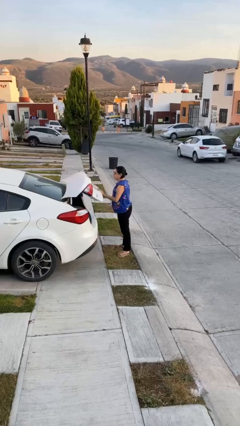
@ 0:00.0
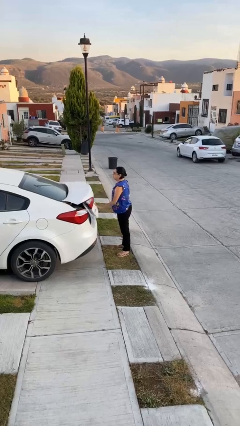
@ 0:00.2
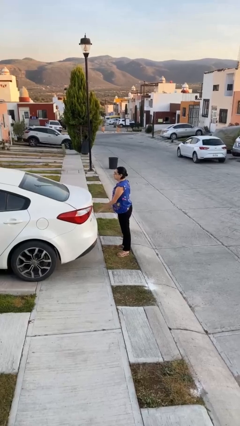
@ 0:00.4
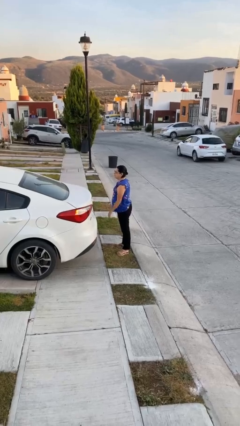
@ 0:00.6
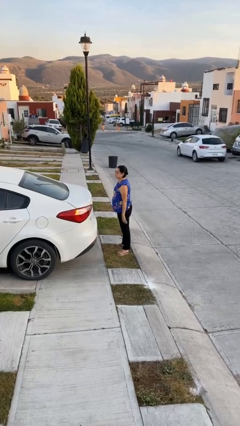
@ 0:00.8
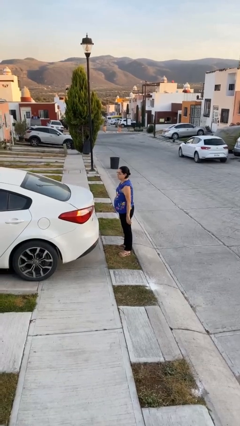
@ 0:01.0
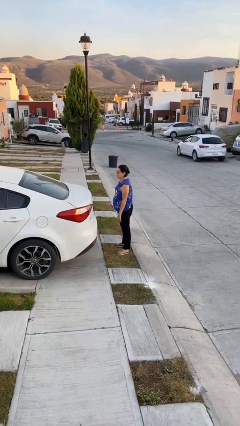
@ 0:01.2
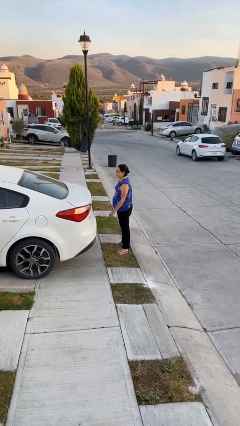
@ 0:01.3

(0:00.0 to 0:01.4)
person closes car trunk

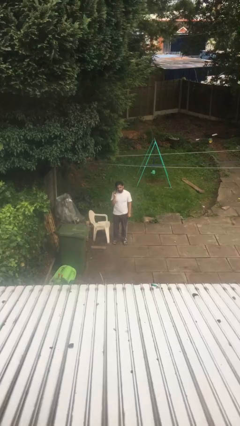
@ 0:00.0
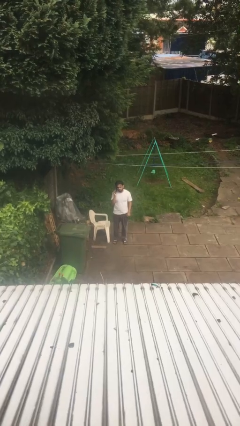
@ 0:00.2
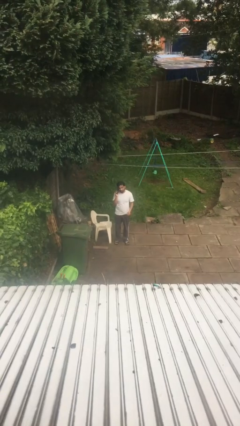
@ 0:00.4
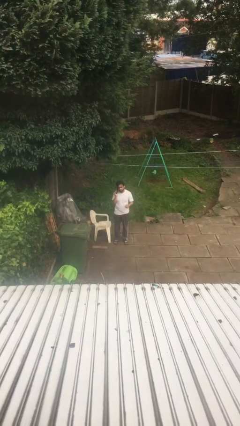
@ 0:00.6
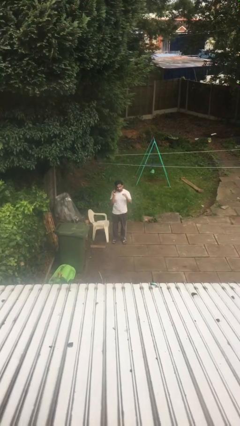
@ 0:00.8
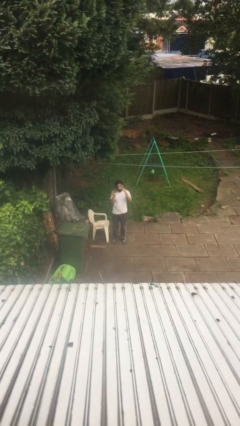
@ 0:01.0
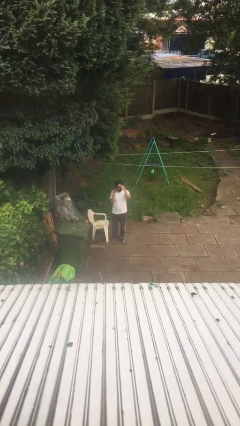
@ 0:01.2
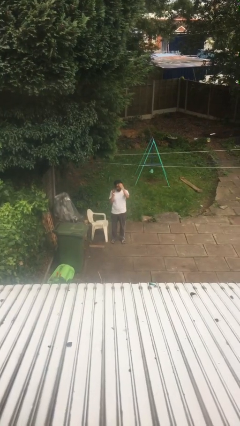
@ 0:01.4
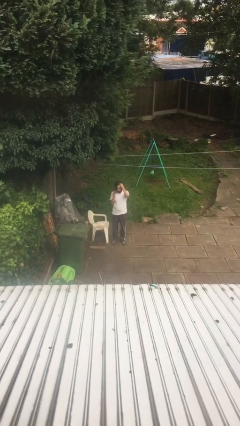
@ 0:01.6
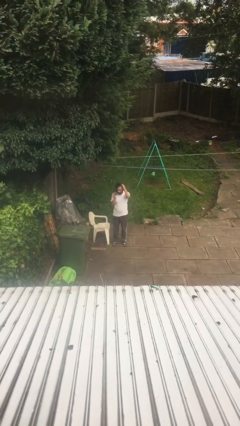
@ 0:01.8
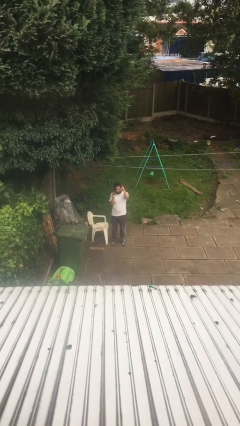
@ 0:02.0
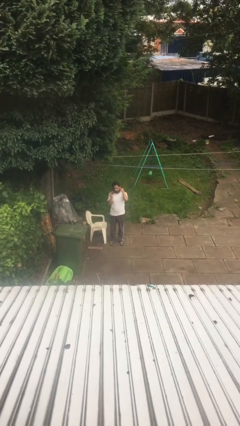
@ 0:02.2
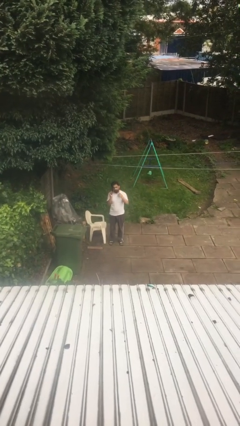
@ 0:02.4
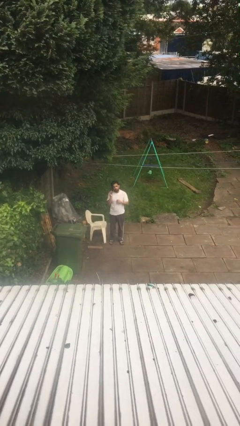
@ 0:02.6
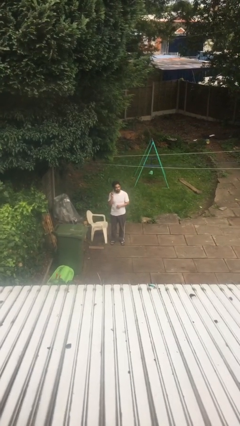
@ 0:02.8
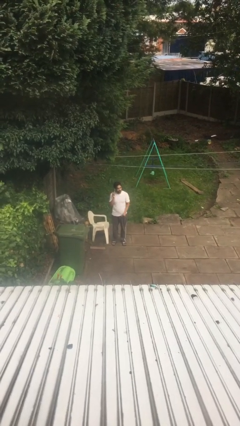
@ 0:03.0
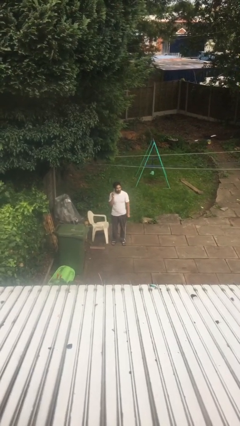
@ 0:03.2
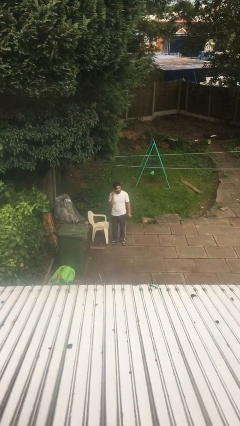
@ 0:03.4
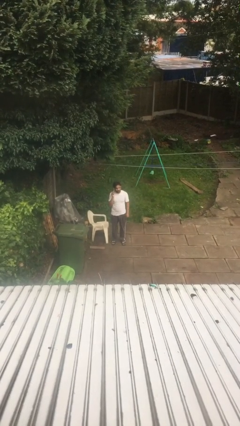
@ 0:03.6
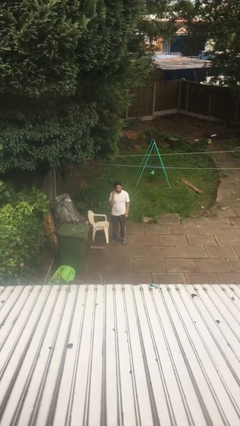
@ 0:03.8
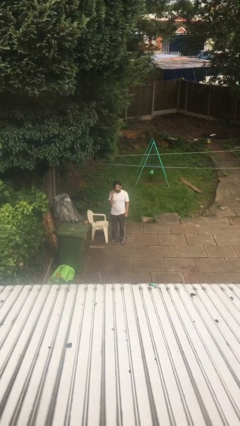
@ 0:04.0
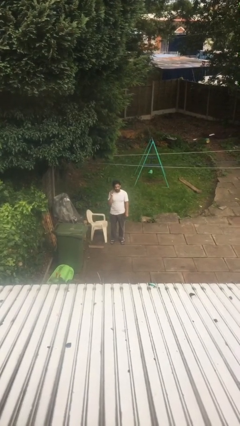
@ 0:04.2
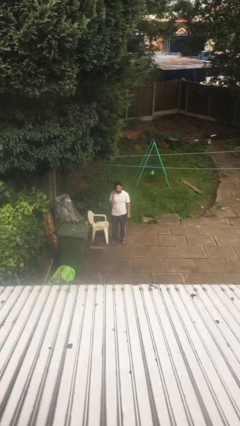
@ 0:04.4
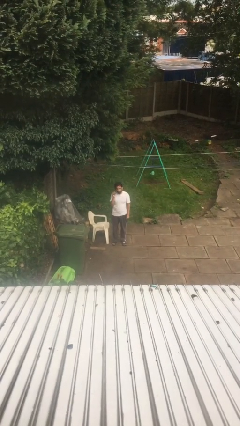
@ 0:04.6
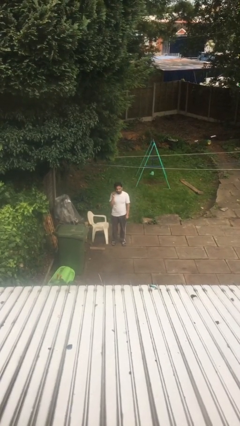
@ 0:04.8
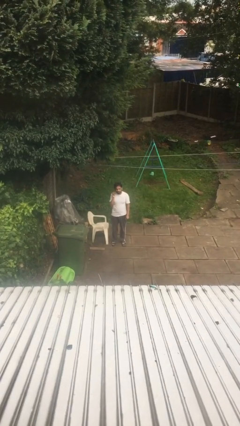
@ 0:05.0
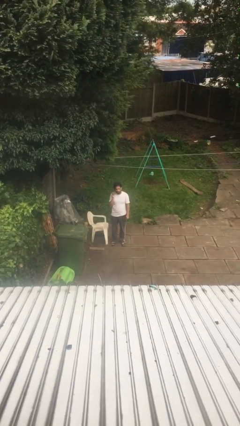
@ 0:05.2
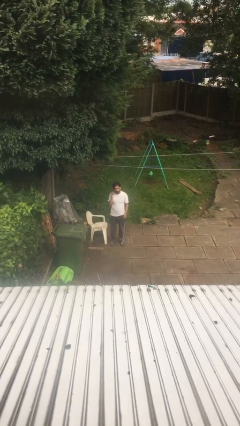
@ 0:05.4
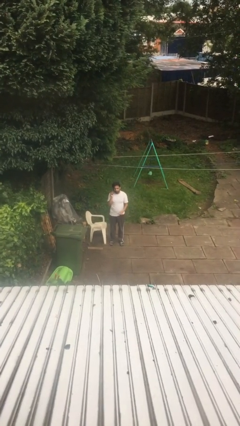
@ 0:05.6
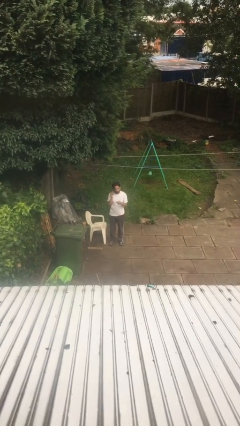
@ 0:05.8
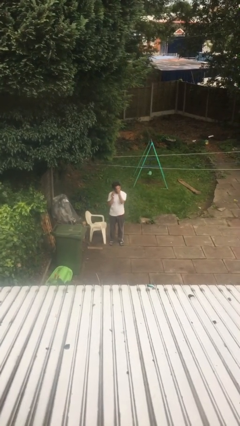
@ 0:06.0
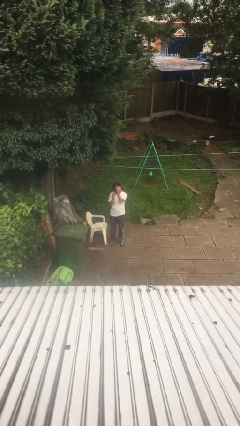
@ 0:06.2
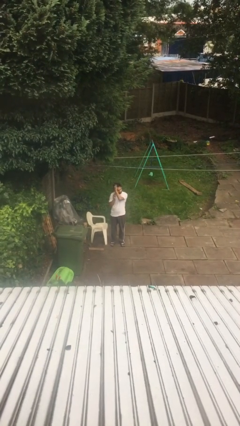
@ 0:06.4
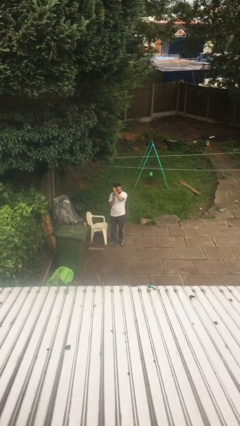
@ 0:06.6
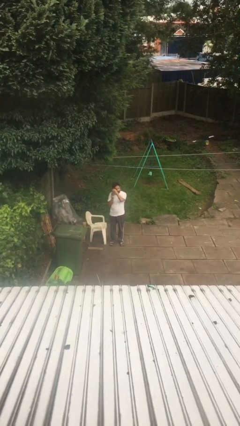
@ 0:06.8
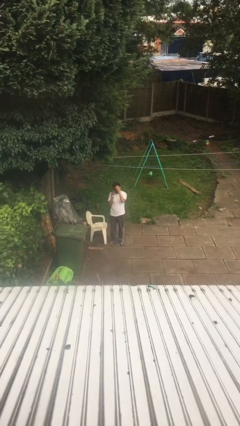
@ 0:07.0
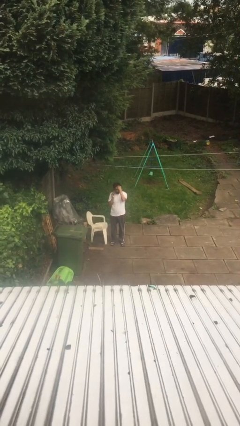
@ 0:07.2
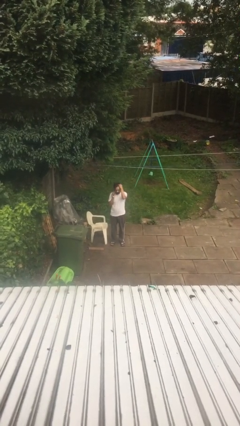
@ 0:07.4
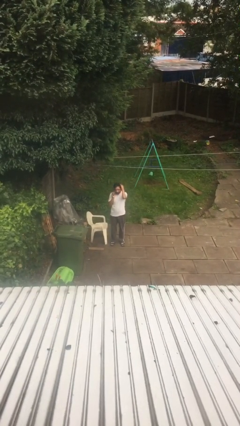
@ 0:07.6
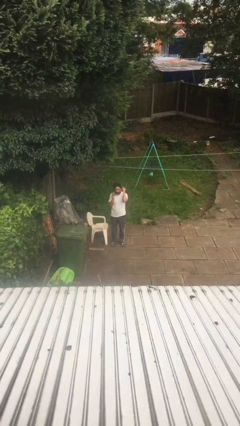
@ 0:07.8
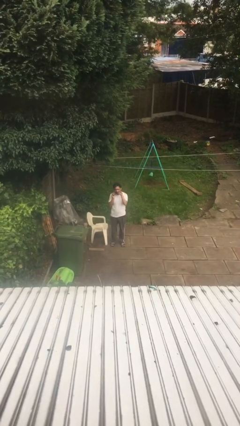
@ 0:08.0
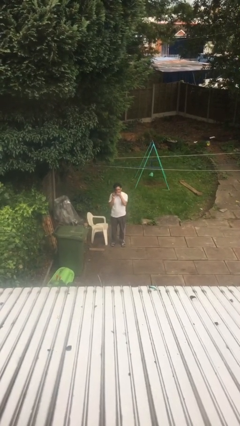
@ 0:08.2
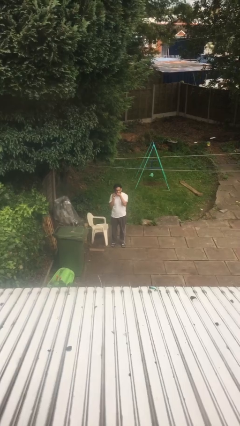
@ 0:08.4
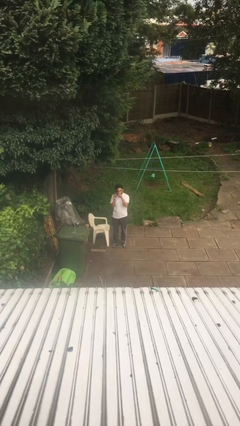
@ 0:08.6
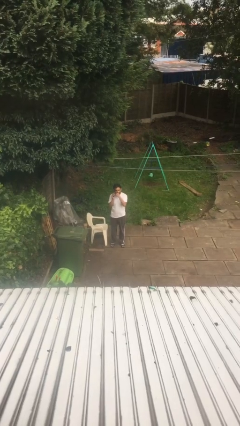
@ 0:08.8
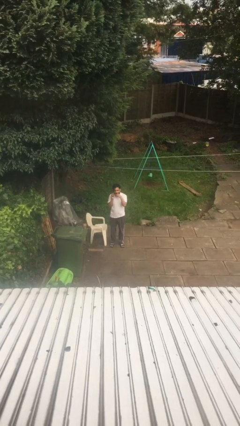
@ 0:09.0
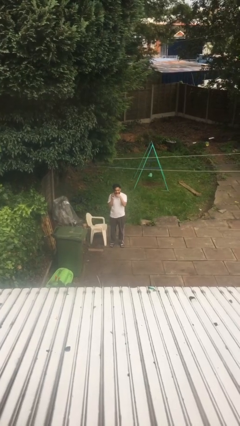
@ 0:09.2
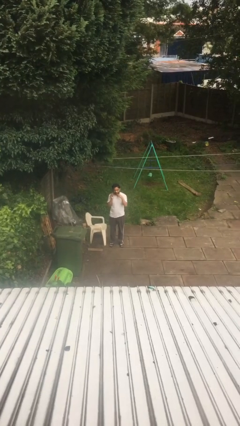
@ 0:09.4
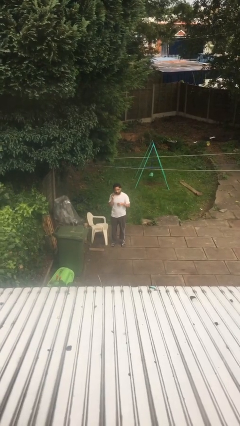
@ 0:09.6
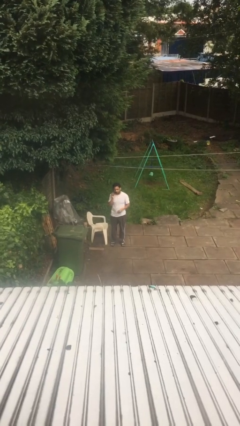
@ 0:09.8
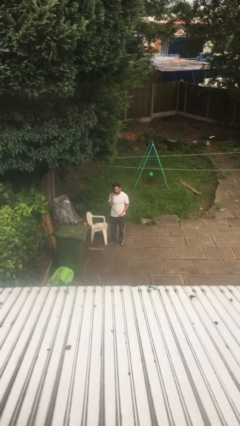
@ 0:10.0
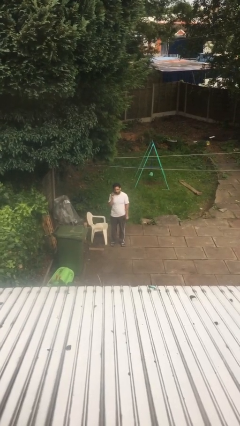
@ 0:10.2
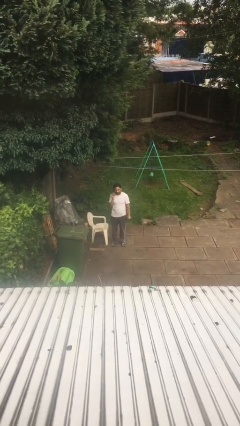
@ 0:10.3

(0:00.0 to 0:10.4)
person talks on phone

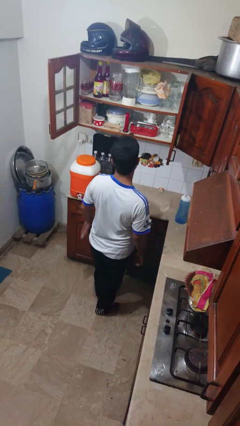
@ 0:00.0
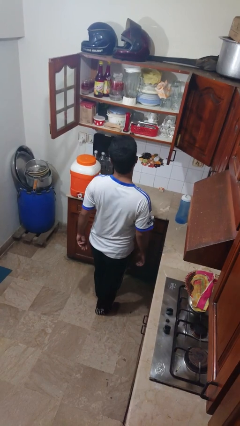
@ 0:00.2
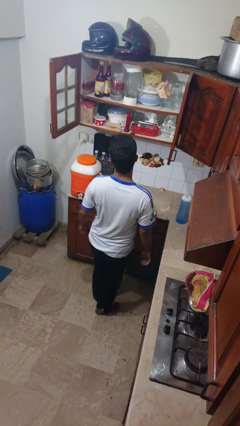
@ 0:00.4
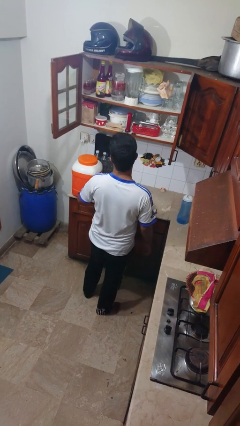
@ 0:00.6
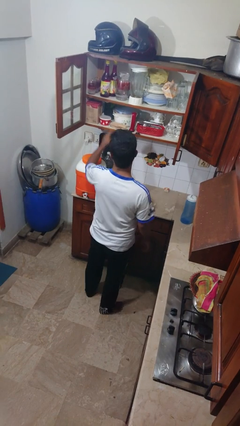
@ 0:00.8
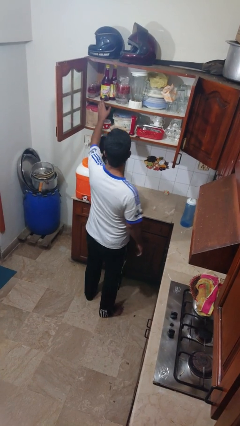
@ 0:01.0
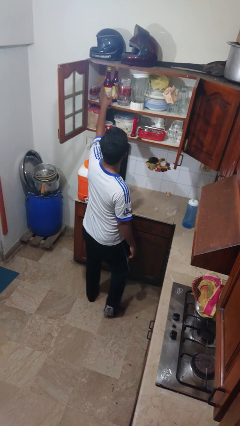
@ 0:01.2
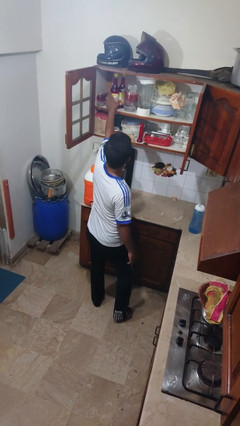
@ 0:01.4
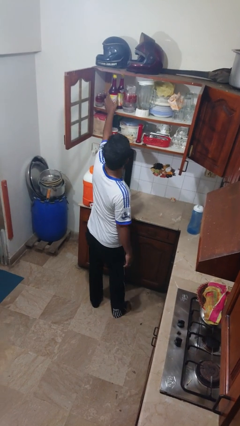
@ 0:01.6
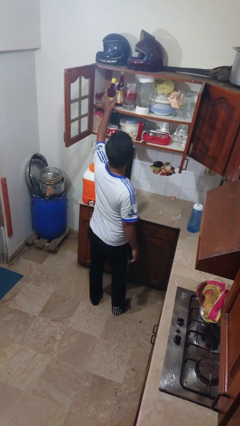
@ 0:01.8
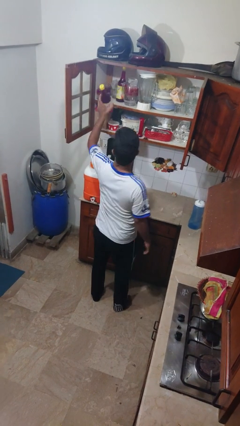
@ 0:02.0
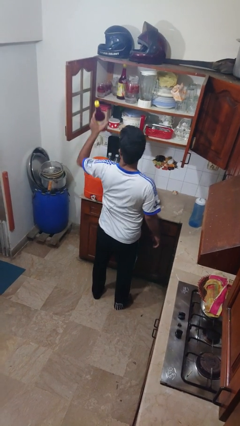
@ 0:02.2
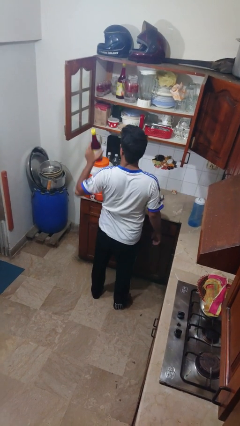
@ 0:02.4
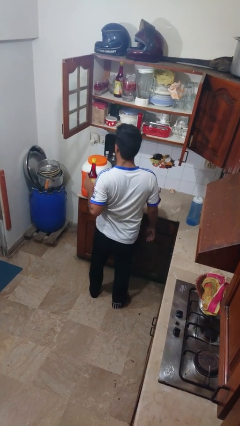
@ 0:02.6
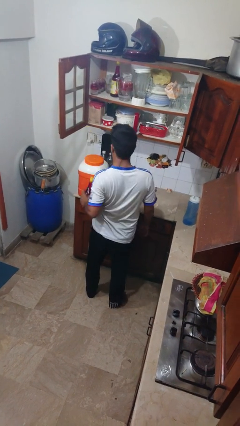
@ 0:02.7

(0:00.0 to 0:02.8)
person picks up object from cabinet

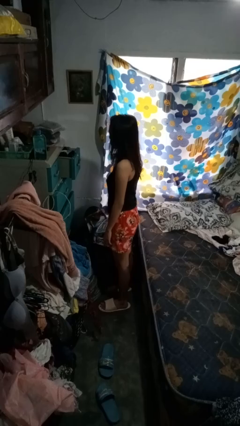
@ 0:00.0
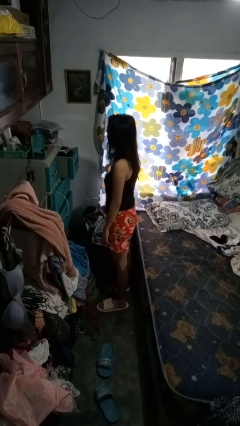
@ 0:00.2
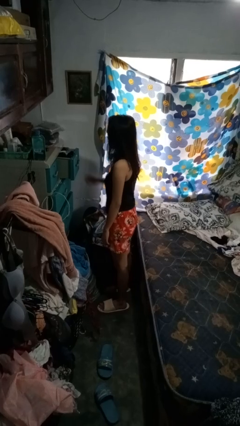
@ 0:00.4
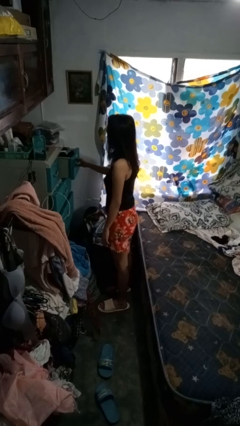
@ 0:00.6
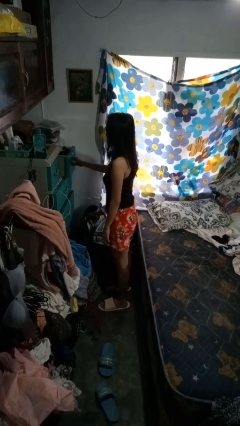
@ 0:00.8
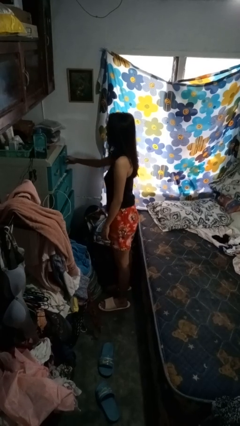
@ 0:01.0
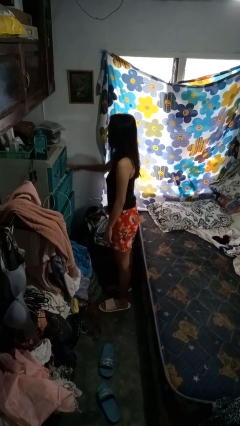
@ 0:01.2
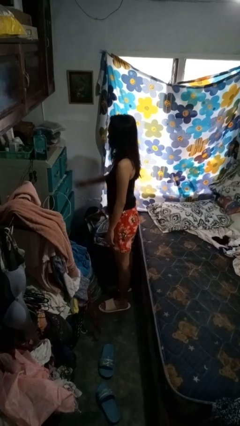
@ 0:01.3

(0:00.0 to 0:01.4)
person closes dresser drawer

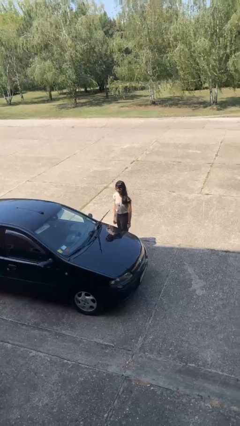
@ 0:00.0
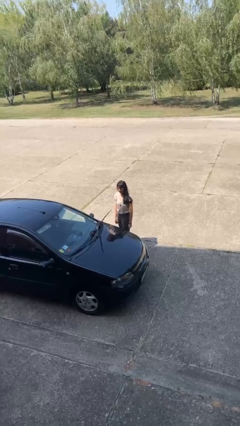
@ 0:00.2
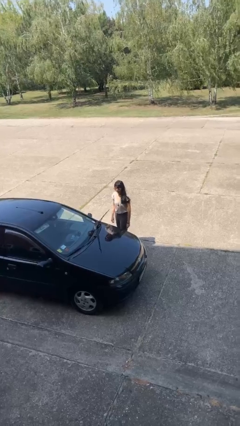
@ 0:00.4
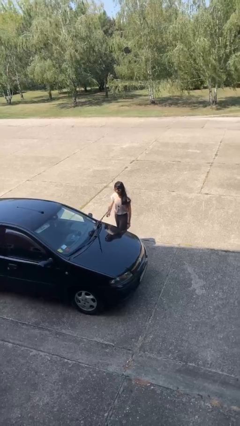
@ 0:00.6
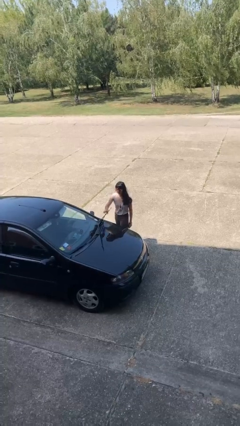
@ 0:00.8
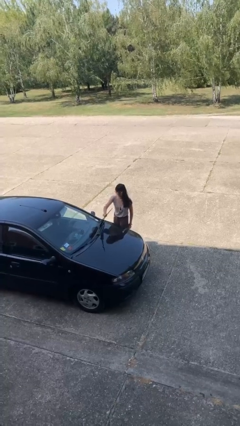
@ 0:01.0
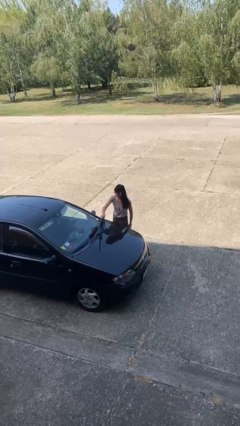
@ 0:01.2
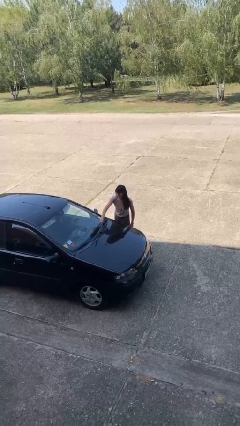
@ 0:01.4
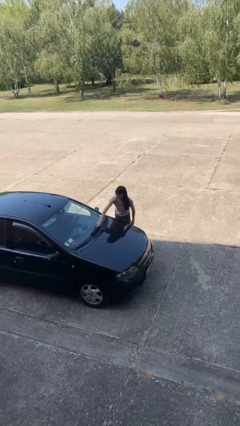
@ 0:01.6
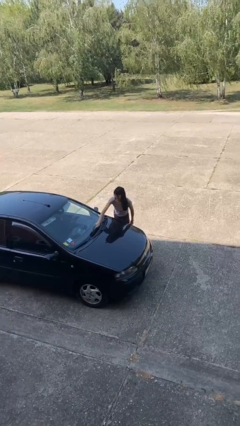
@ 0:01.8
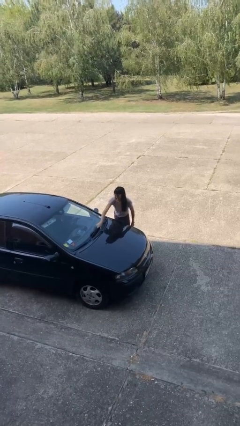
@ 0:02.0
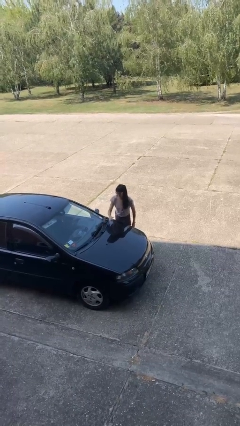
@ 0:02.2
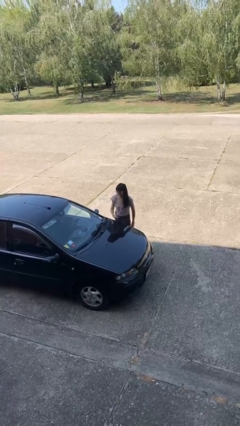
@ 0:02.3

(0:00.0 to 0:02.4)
person flips down car wipers
